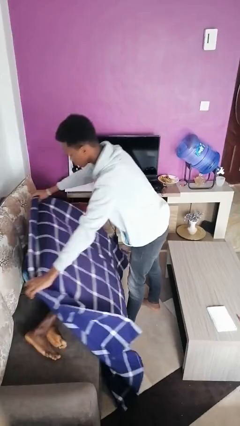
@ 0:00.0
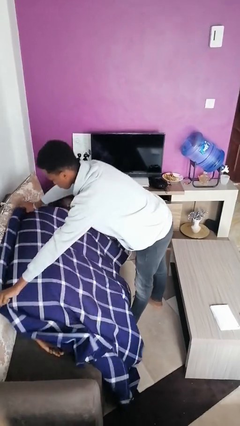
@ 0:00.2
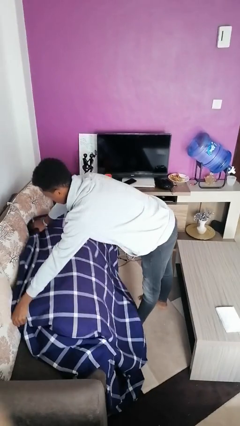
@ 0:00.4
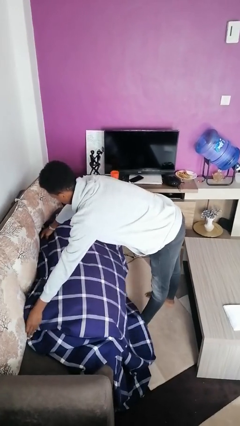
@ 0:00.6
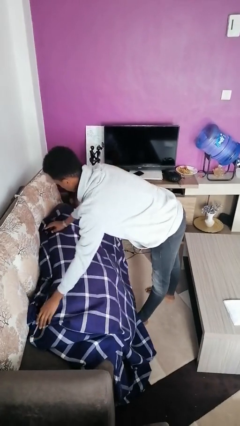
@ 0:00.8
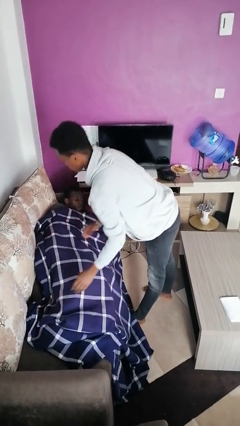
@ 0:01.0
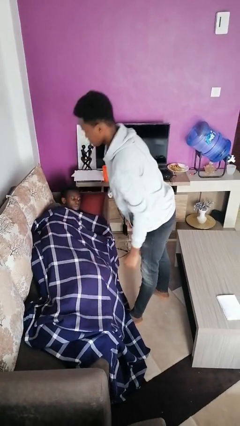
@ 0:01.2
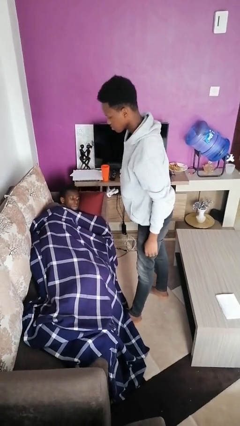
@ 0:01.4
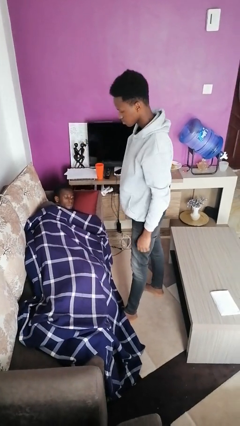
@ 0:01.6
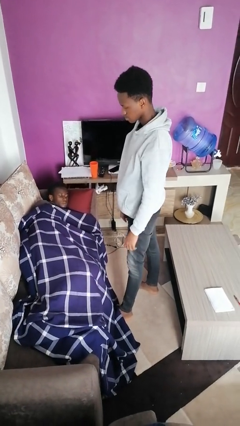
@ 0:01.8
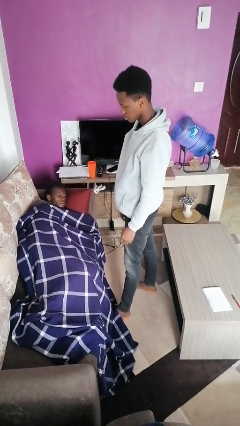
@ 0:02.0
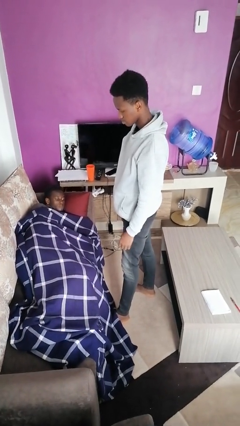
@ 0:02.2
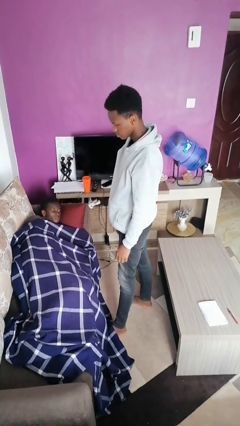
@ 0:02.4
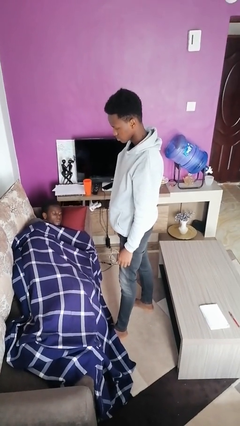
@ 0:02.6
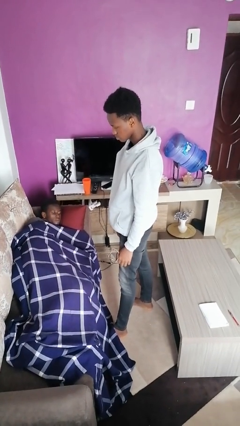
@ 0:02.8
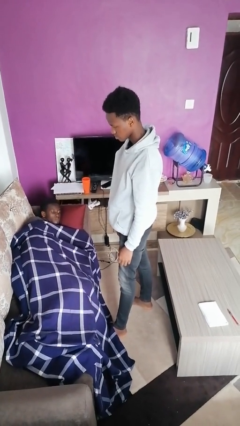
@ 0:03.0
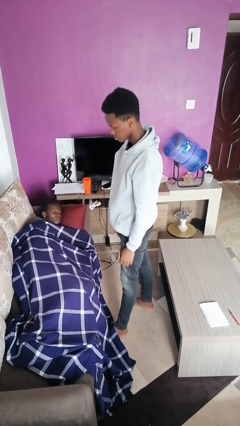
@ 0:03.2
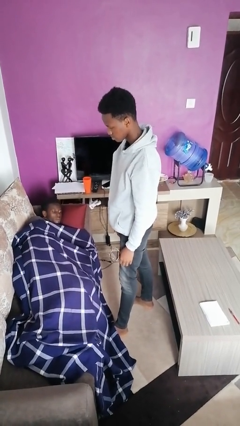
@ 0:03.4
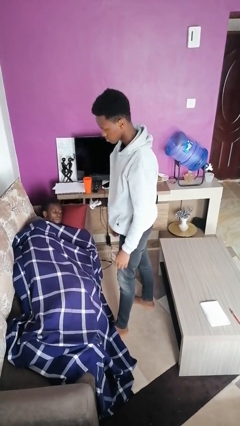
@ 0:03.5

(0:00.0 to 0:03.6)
person covers friend with blanket

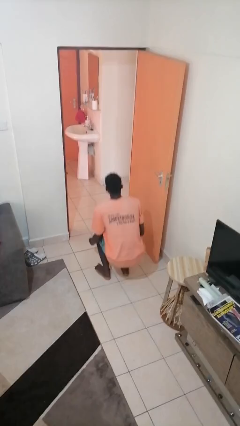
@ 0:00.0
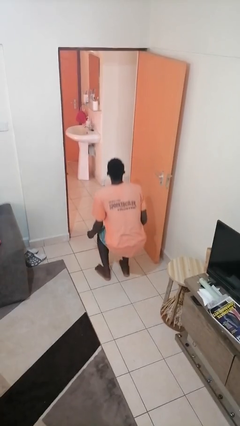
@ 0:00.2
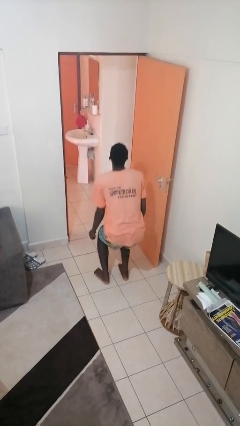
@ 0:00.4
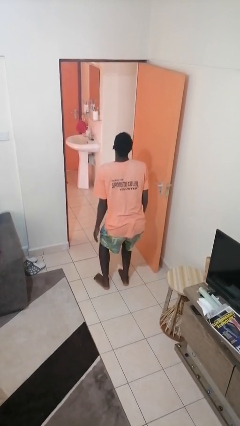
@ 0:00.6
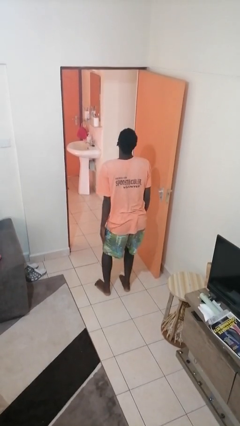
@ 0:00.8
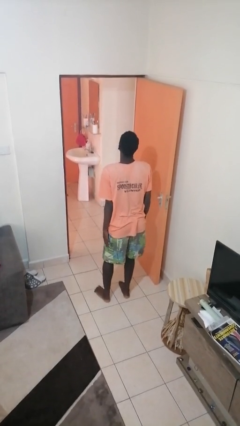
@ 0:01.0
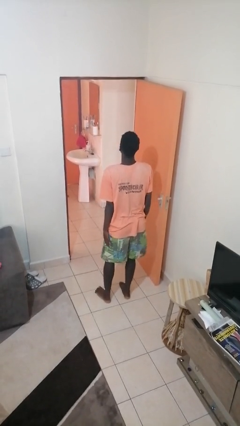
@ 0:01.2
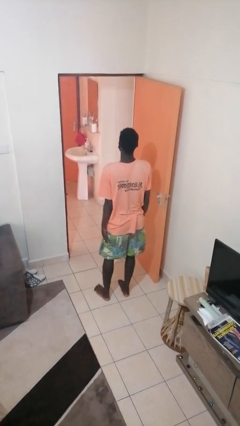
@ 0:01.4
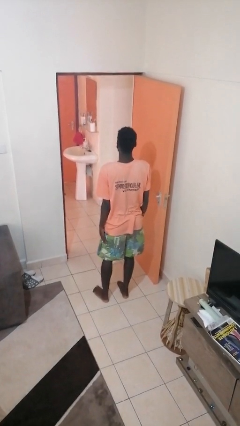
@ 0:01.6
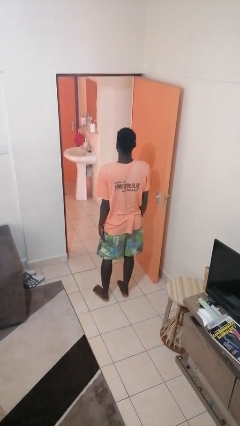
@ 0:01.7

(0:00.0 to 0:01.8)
person stands up

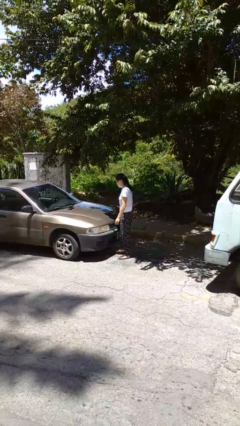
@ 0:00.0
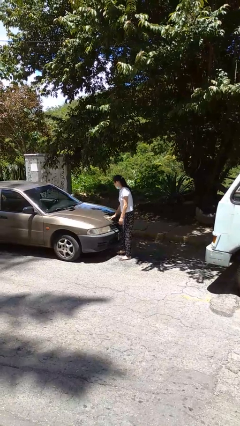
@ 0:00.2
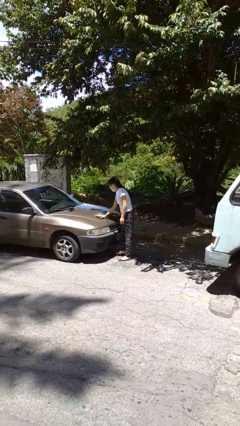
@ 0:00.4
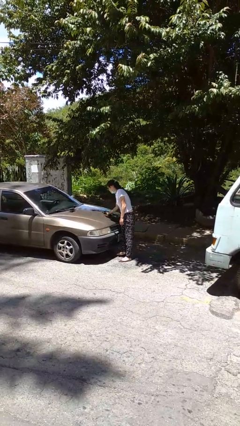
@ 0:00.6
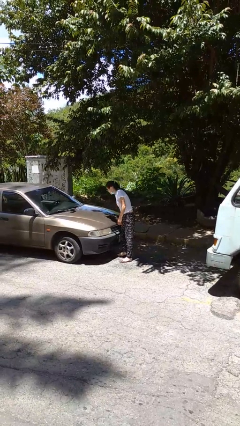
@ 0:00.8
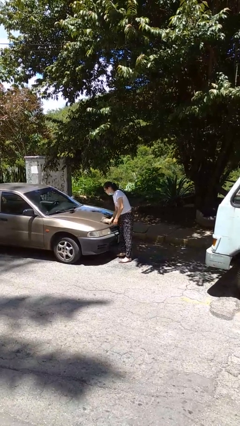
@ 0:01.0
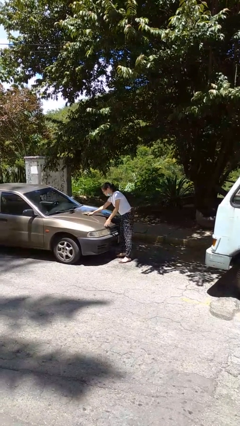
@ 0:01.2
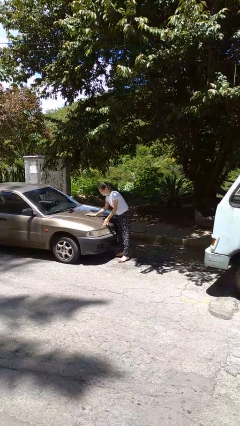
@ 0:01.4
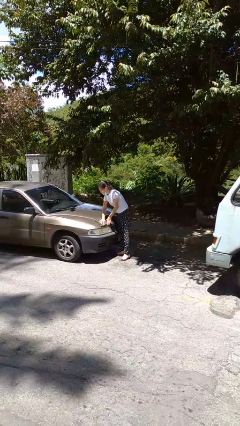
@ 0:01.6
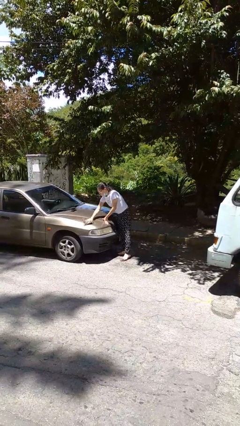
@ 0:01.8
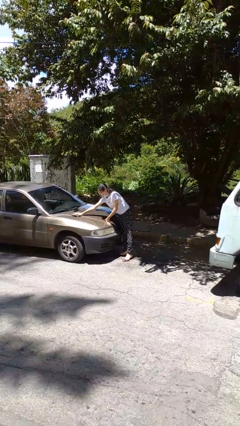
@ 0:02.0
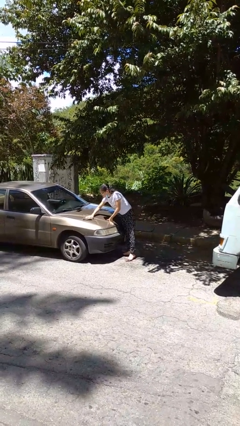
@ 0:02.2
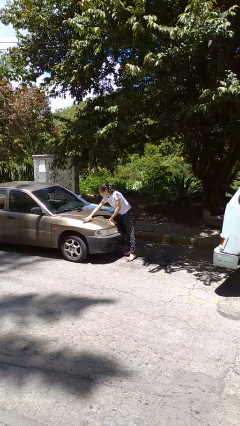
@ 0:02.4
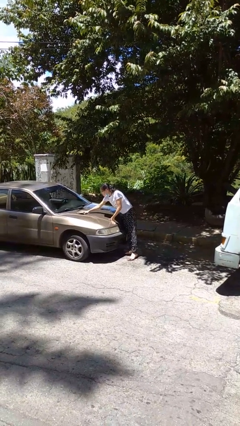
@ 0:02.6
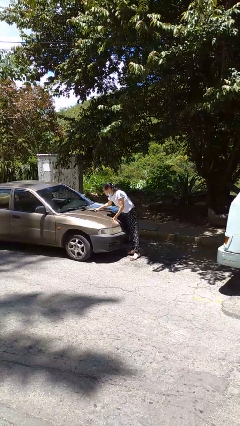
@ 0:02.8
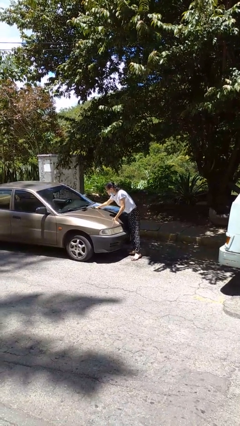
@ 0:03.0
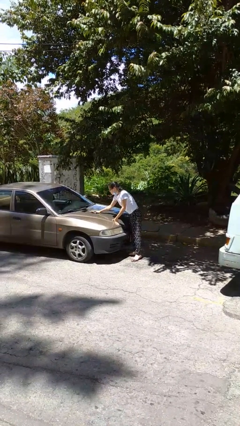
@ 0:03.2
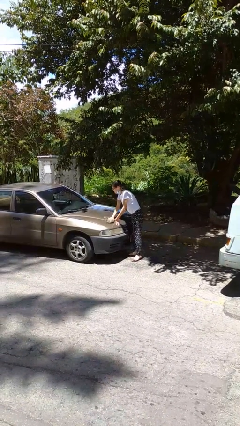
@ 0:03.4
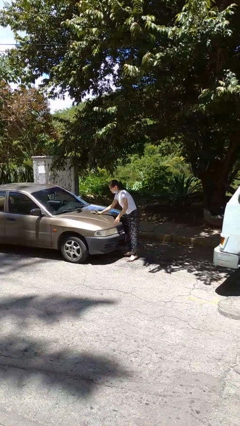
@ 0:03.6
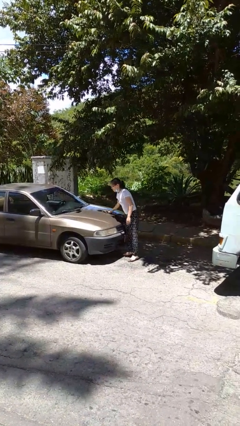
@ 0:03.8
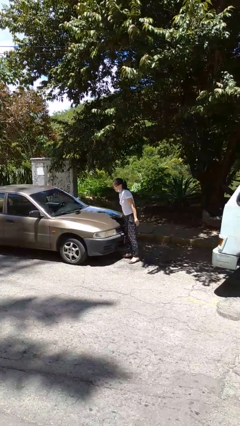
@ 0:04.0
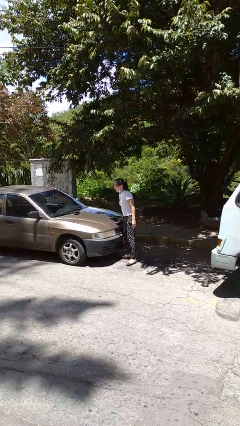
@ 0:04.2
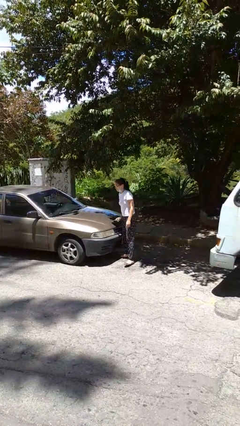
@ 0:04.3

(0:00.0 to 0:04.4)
person polishes car with rag

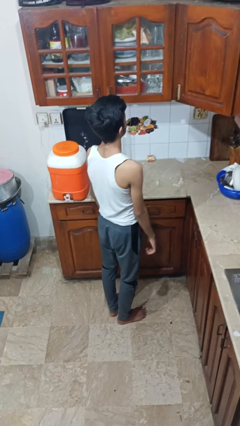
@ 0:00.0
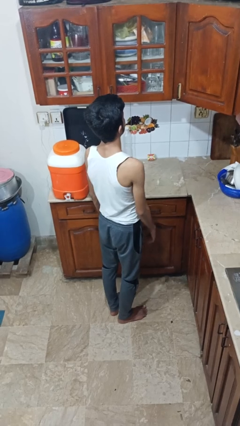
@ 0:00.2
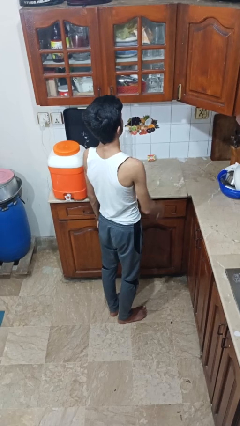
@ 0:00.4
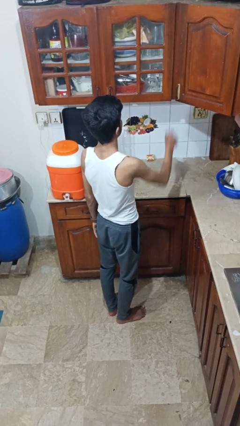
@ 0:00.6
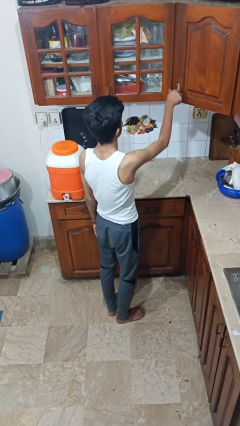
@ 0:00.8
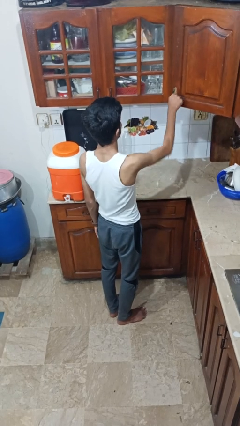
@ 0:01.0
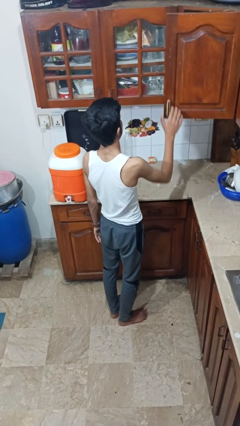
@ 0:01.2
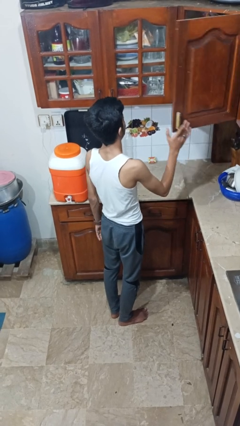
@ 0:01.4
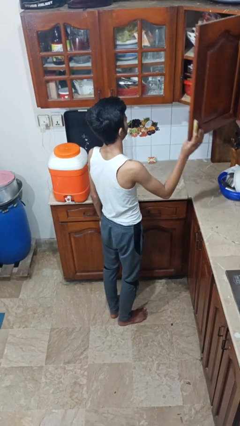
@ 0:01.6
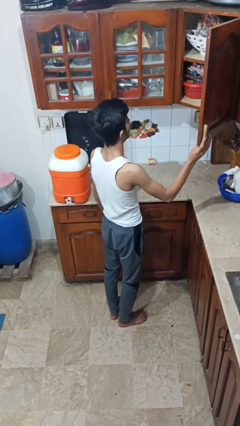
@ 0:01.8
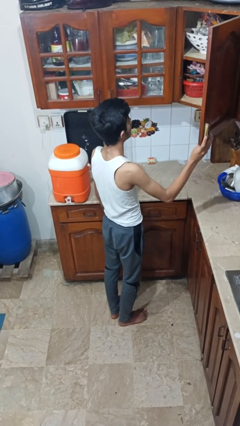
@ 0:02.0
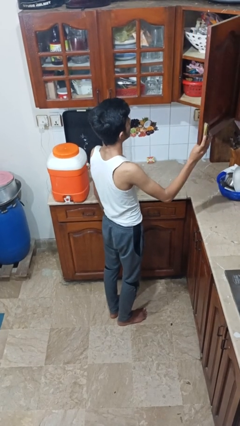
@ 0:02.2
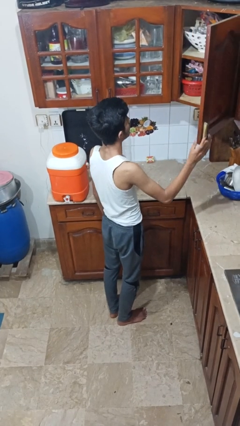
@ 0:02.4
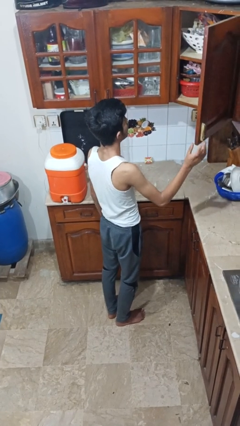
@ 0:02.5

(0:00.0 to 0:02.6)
person closes cabinet

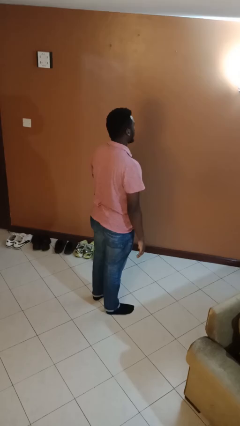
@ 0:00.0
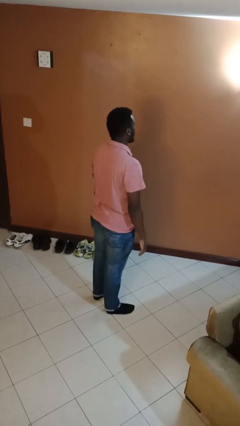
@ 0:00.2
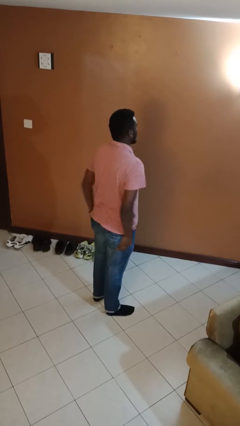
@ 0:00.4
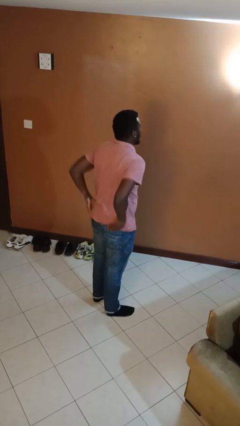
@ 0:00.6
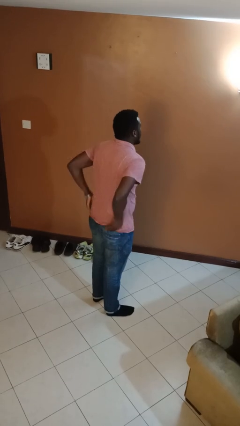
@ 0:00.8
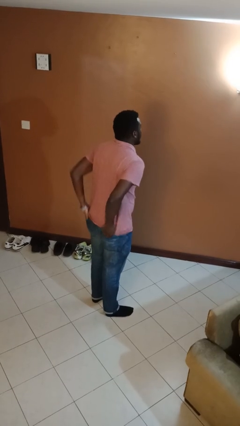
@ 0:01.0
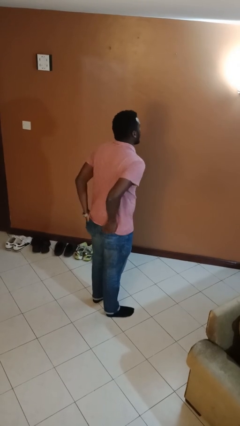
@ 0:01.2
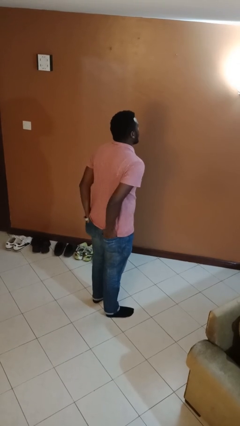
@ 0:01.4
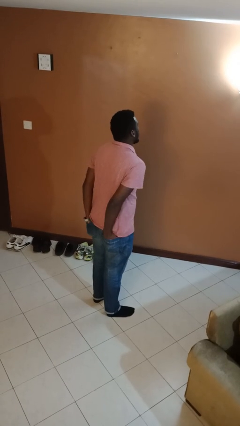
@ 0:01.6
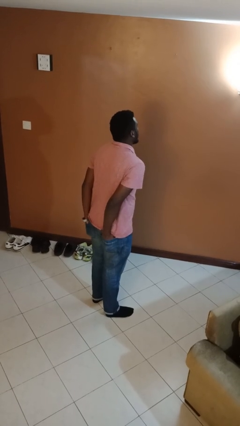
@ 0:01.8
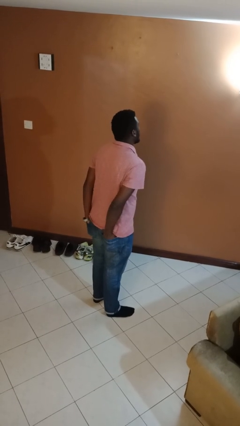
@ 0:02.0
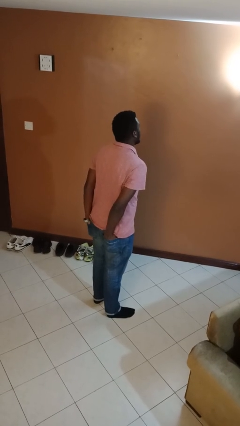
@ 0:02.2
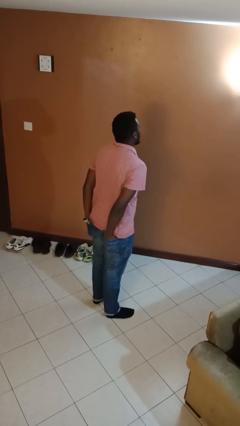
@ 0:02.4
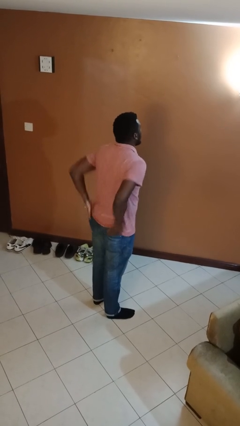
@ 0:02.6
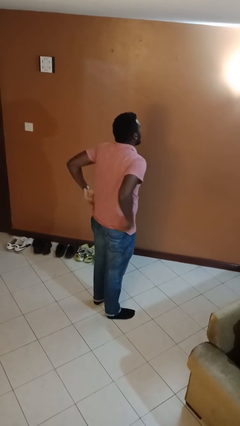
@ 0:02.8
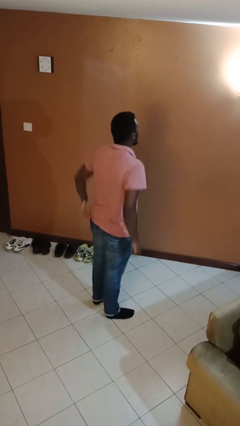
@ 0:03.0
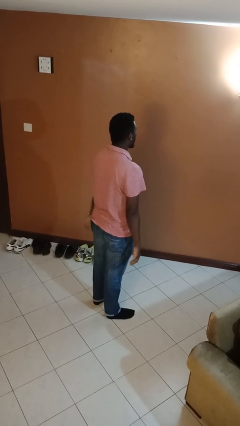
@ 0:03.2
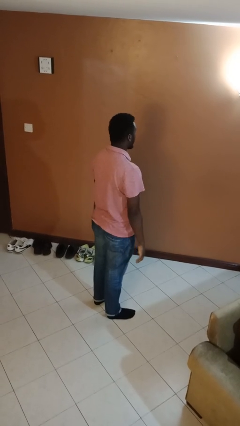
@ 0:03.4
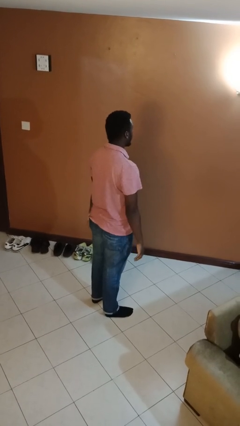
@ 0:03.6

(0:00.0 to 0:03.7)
person puts hands in back pockets

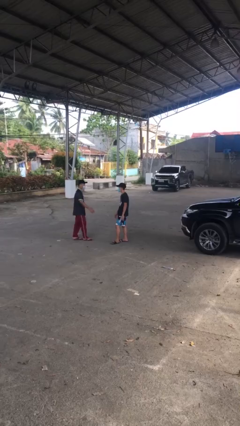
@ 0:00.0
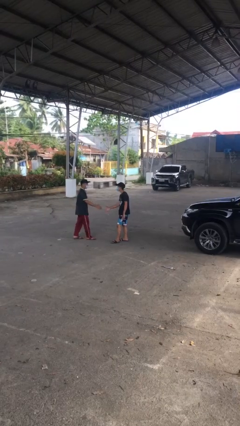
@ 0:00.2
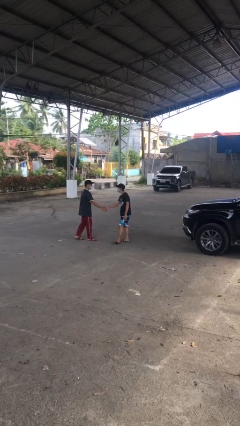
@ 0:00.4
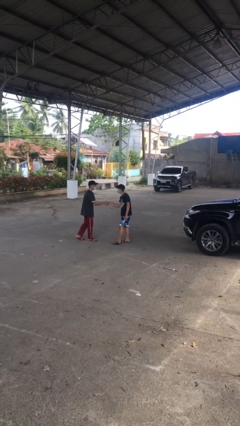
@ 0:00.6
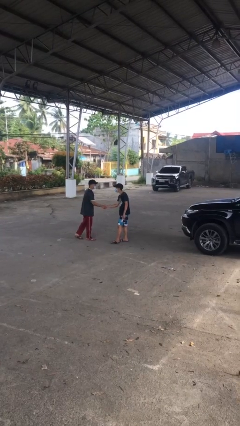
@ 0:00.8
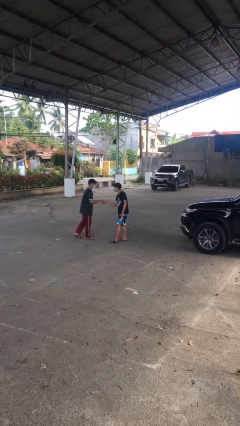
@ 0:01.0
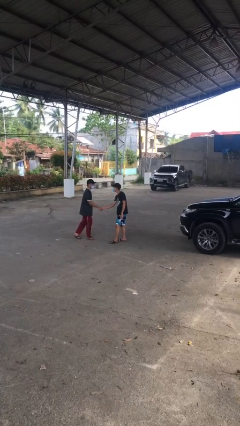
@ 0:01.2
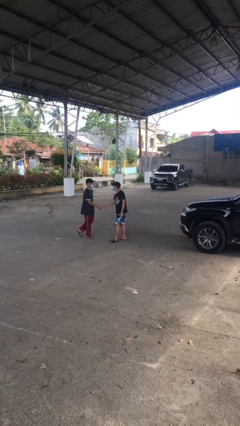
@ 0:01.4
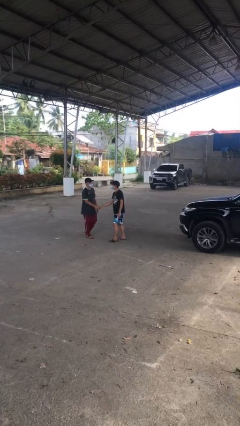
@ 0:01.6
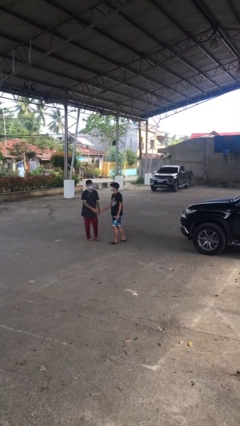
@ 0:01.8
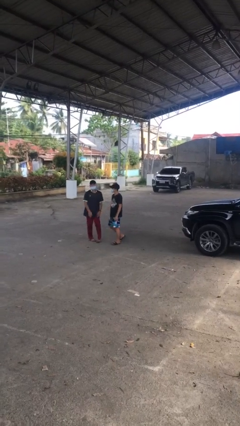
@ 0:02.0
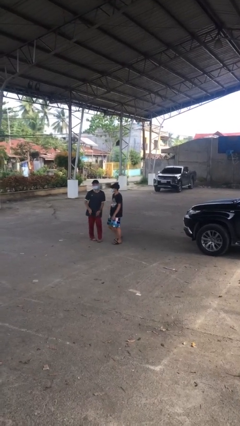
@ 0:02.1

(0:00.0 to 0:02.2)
person shakes hand
